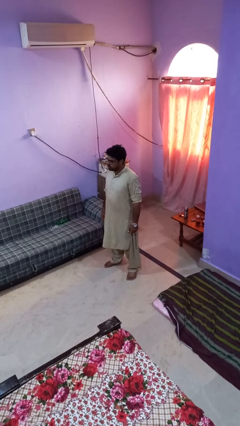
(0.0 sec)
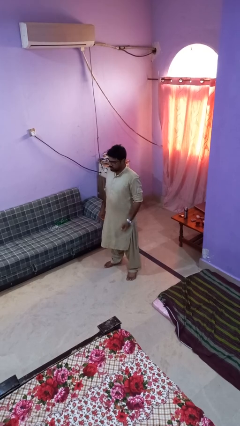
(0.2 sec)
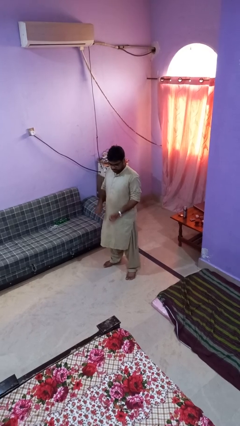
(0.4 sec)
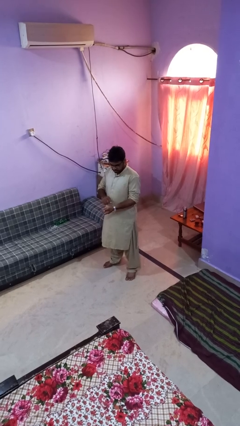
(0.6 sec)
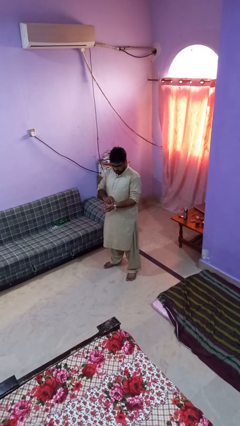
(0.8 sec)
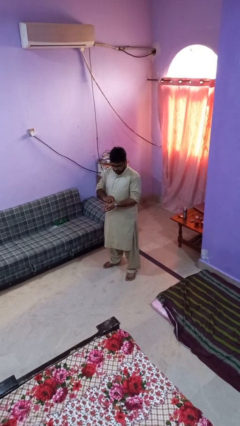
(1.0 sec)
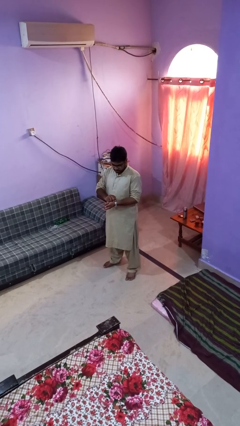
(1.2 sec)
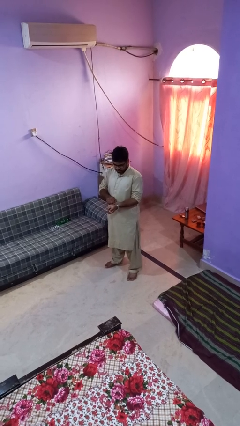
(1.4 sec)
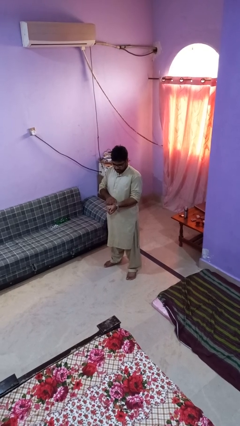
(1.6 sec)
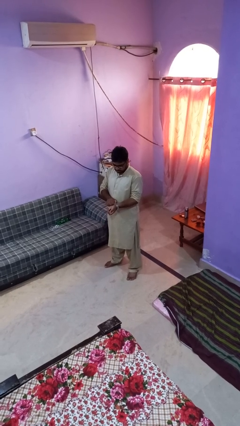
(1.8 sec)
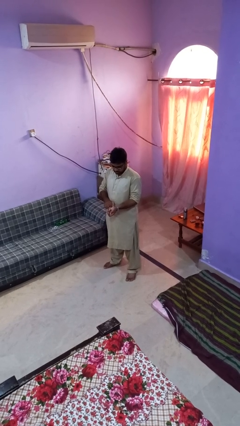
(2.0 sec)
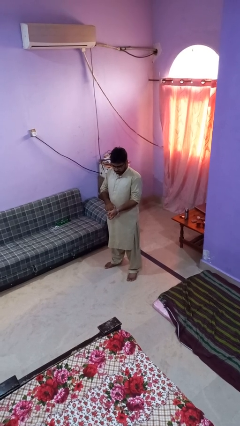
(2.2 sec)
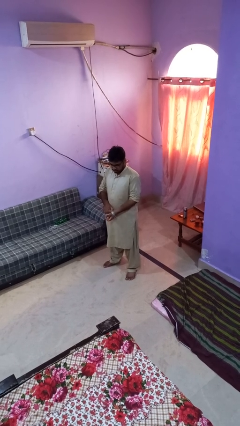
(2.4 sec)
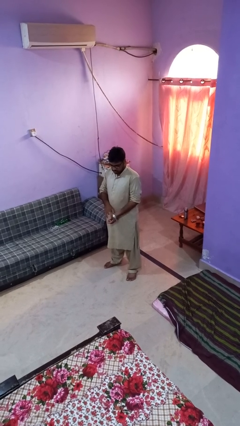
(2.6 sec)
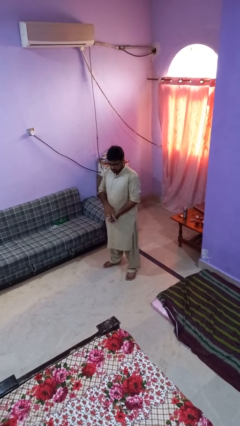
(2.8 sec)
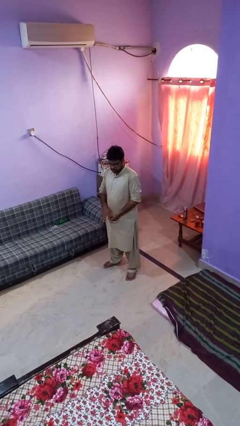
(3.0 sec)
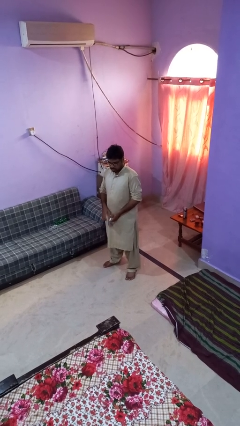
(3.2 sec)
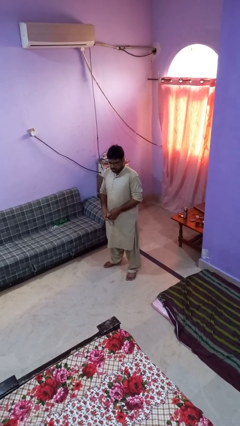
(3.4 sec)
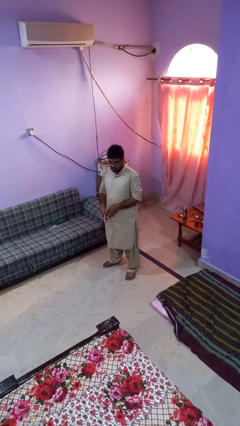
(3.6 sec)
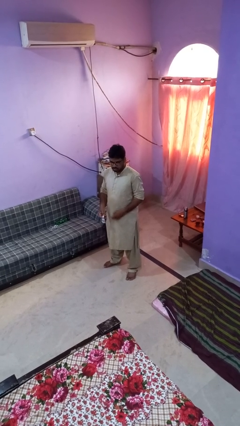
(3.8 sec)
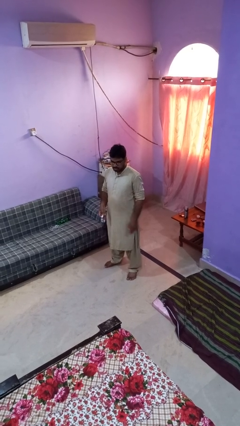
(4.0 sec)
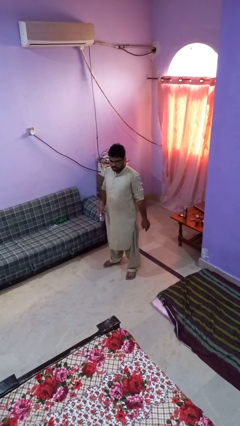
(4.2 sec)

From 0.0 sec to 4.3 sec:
person takes off wristwatch

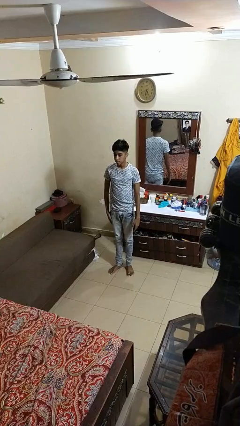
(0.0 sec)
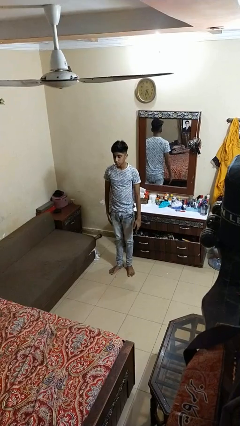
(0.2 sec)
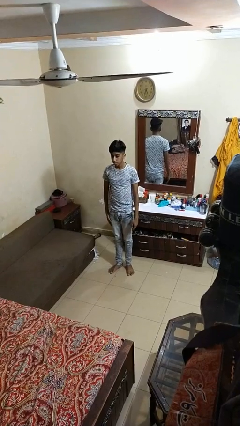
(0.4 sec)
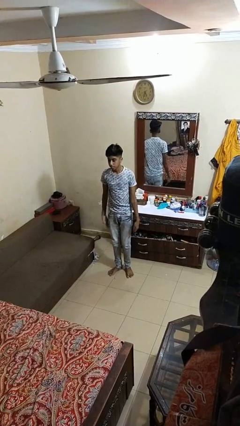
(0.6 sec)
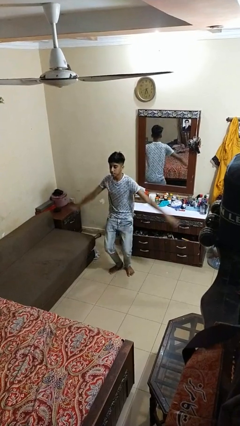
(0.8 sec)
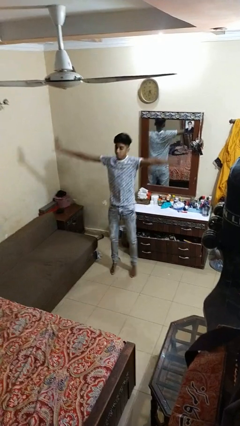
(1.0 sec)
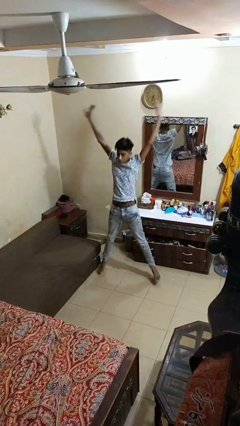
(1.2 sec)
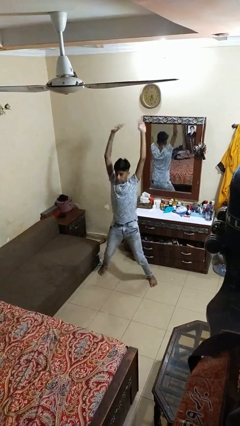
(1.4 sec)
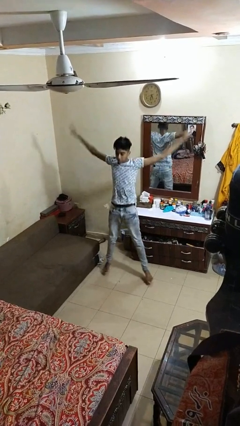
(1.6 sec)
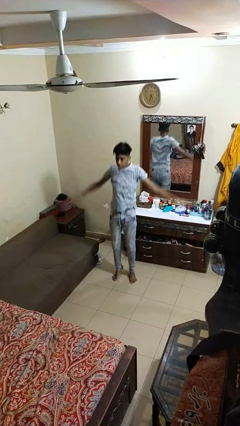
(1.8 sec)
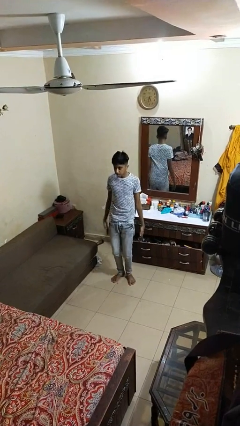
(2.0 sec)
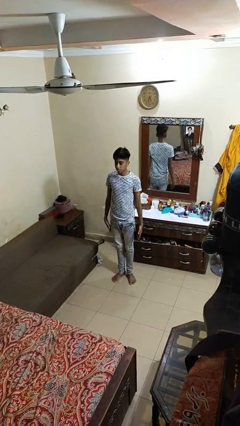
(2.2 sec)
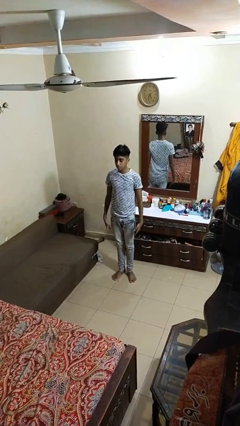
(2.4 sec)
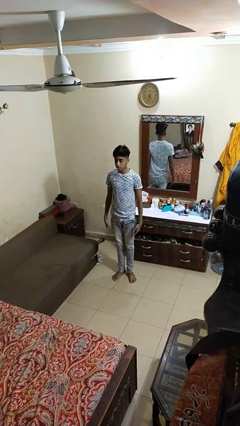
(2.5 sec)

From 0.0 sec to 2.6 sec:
person exercises with jumping jacks

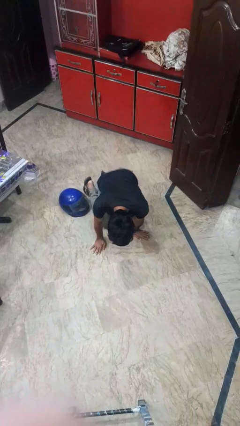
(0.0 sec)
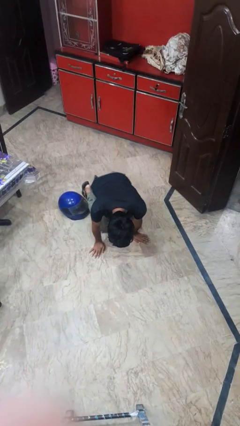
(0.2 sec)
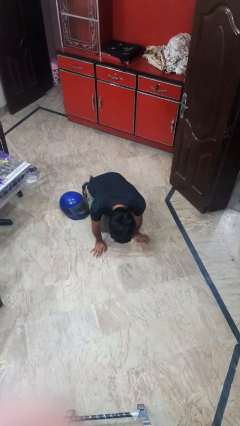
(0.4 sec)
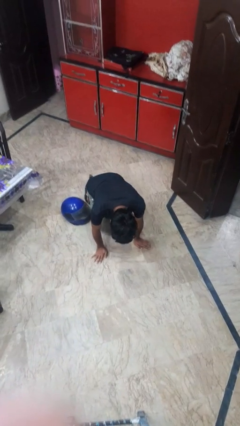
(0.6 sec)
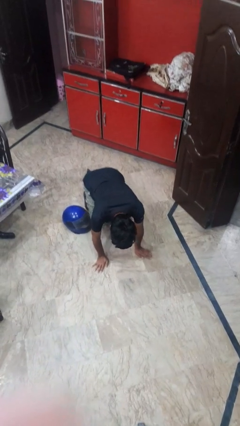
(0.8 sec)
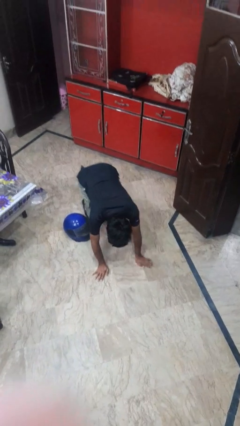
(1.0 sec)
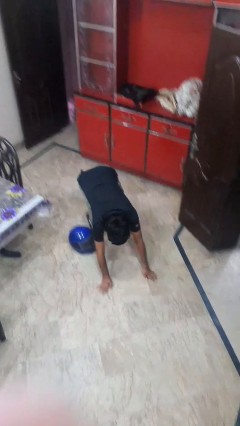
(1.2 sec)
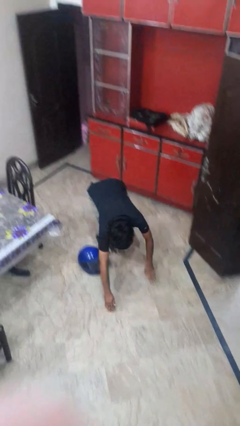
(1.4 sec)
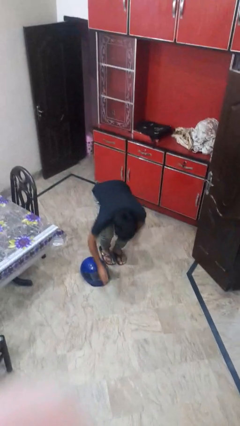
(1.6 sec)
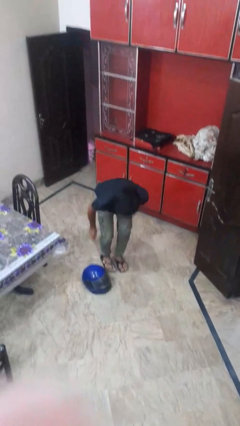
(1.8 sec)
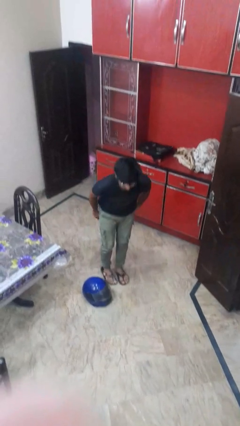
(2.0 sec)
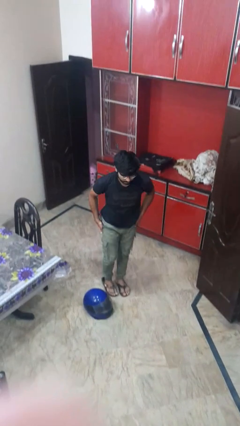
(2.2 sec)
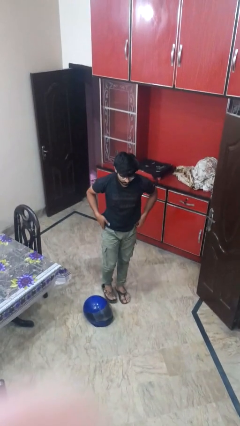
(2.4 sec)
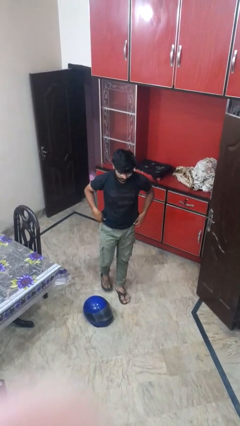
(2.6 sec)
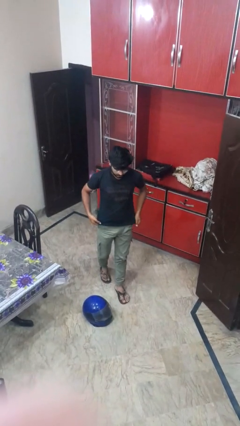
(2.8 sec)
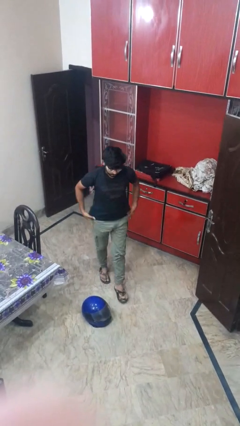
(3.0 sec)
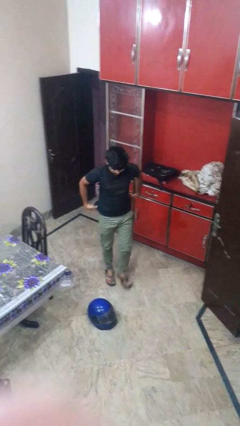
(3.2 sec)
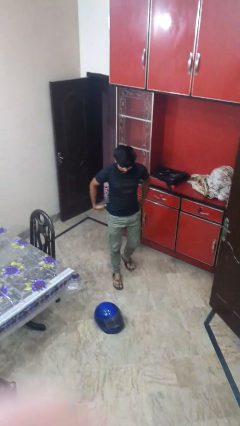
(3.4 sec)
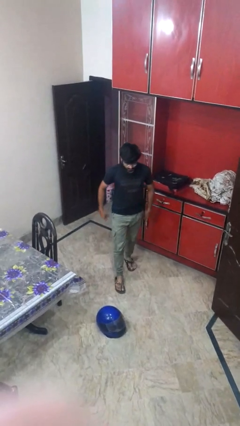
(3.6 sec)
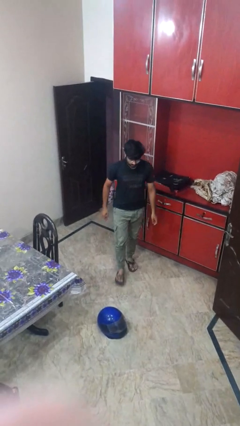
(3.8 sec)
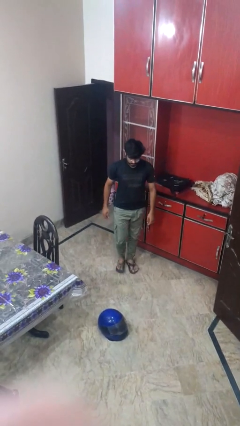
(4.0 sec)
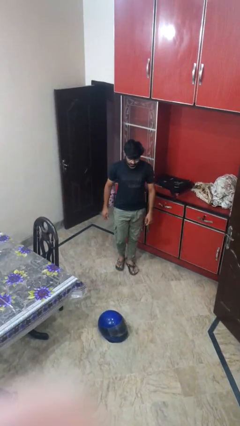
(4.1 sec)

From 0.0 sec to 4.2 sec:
person stands up from floor

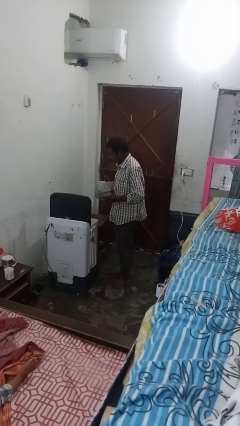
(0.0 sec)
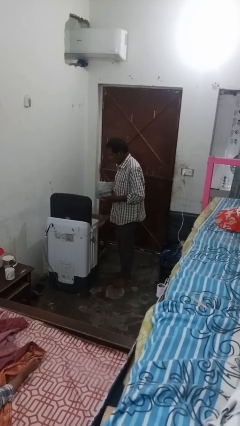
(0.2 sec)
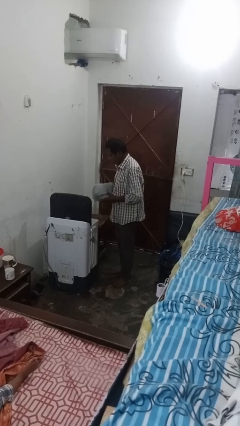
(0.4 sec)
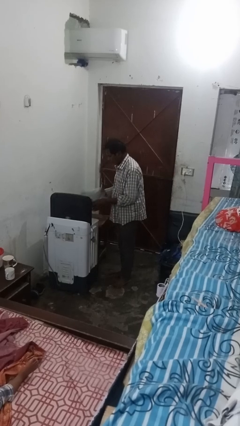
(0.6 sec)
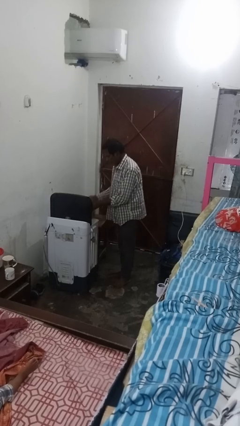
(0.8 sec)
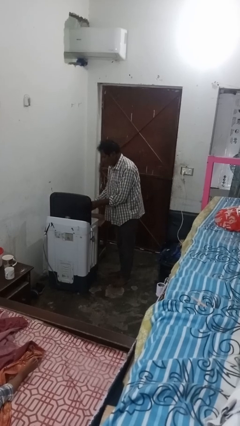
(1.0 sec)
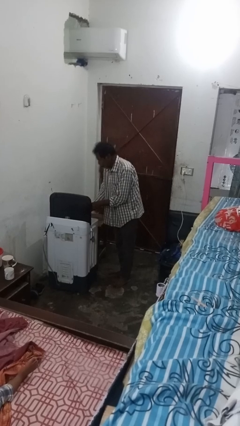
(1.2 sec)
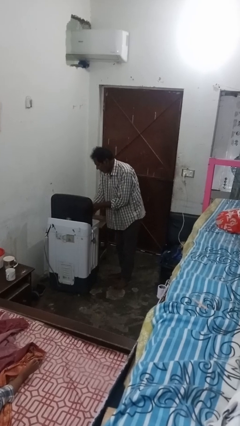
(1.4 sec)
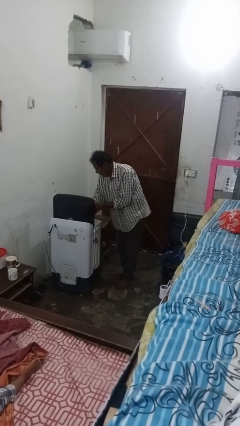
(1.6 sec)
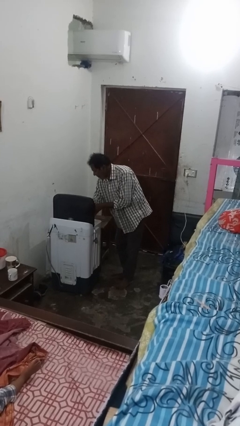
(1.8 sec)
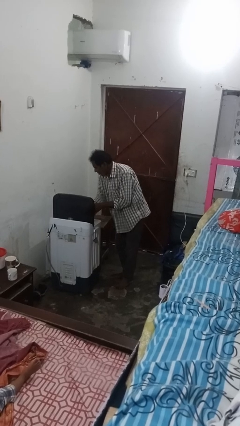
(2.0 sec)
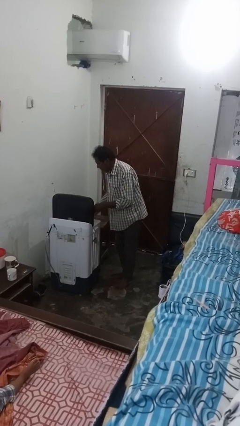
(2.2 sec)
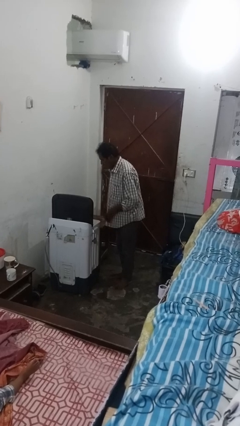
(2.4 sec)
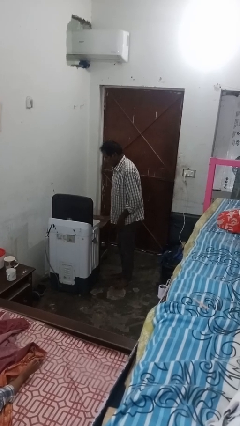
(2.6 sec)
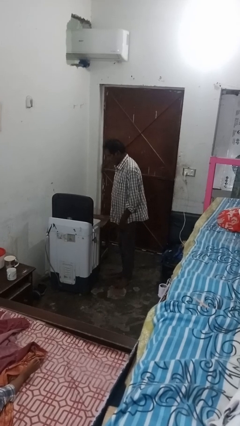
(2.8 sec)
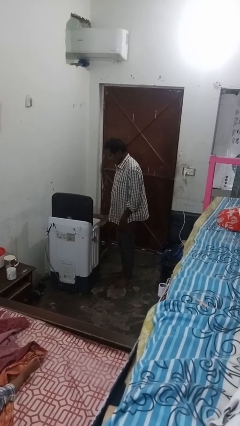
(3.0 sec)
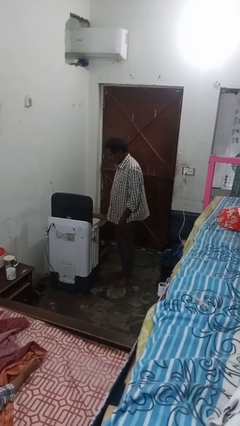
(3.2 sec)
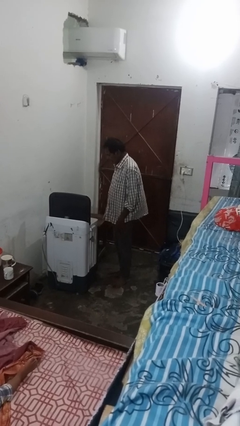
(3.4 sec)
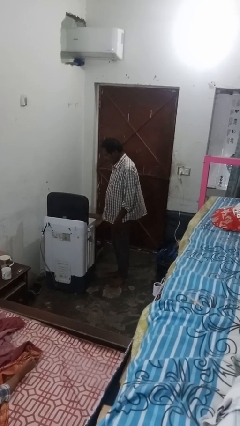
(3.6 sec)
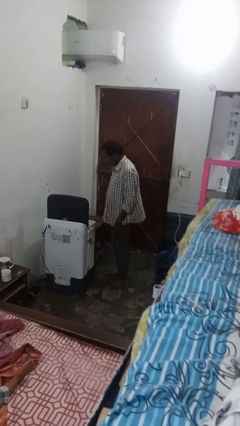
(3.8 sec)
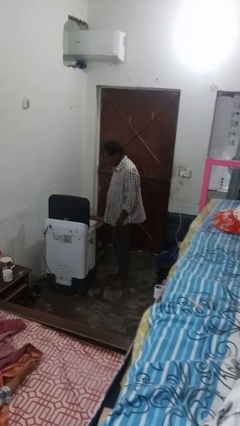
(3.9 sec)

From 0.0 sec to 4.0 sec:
person loads dryer

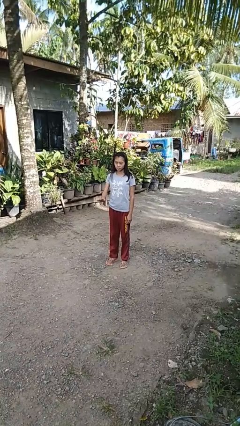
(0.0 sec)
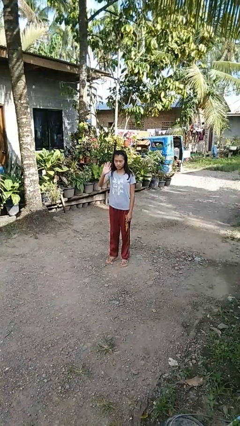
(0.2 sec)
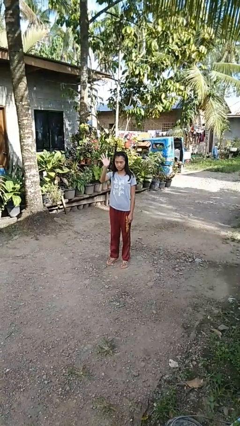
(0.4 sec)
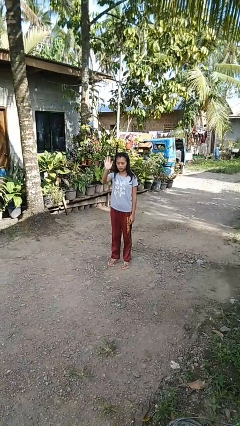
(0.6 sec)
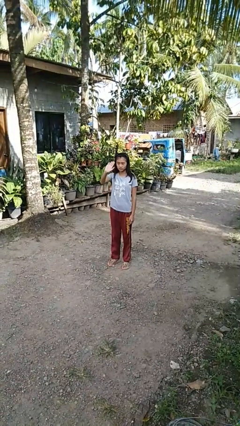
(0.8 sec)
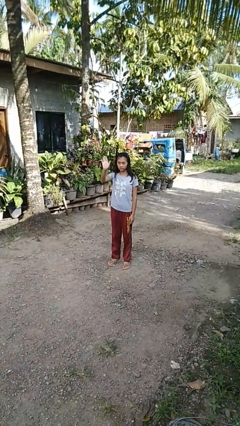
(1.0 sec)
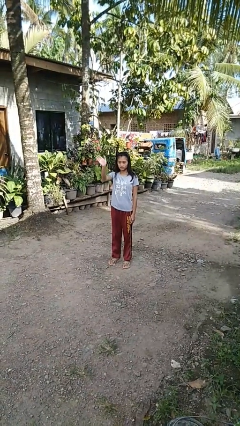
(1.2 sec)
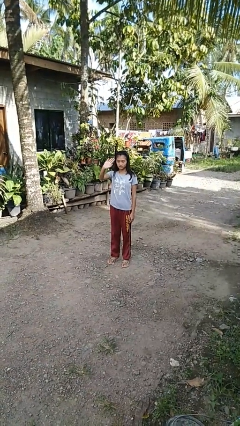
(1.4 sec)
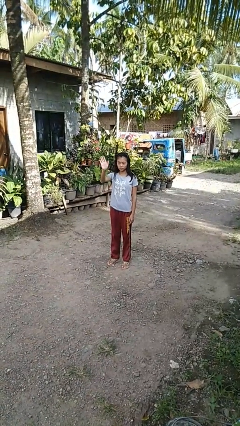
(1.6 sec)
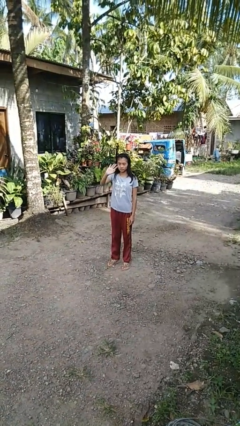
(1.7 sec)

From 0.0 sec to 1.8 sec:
person waves at person

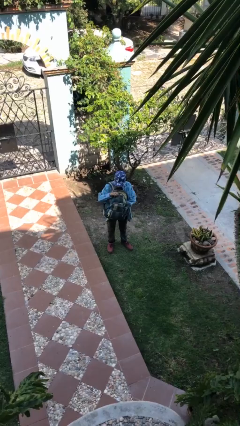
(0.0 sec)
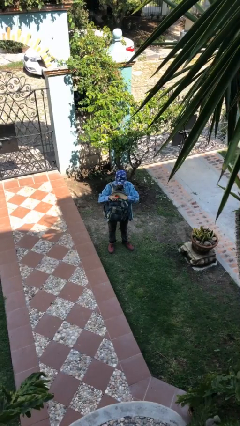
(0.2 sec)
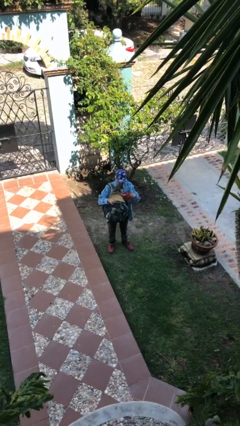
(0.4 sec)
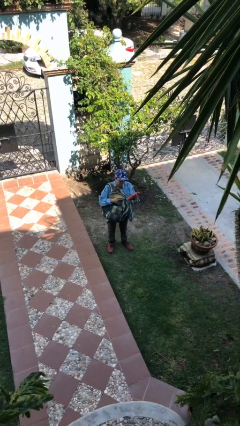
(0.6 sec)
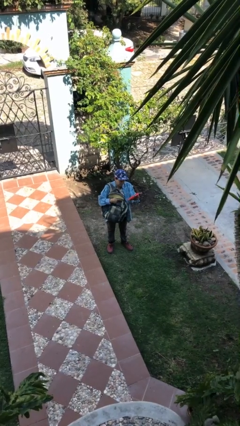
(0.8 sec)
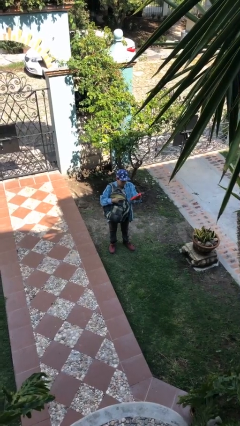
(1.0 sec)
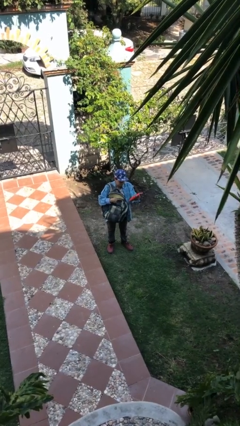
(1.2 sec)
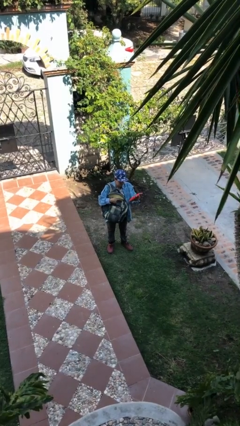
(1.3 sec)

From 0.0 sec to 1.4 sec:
person takes object from backpack
